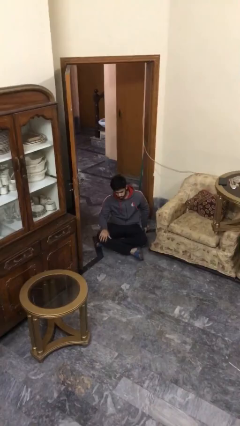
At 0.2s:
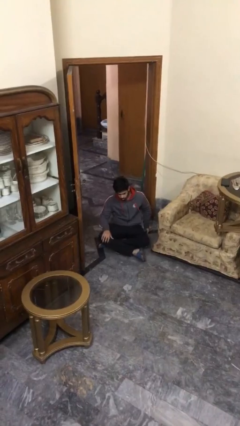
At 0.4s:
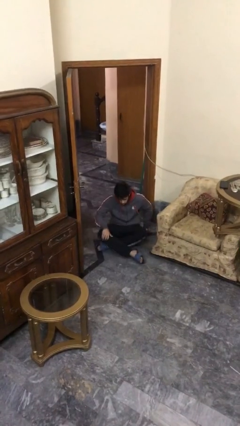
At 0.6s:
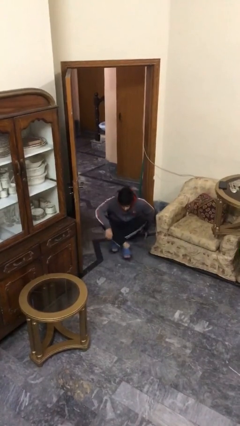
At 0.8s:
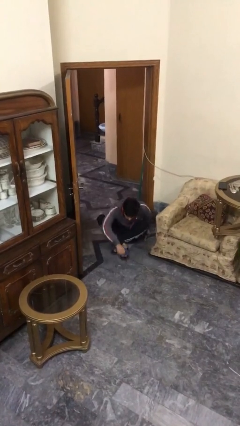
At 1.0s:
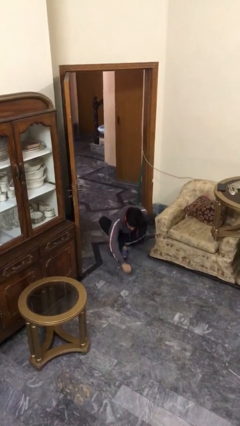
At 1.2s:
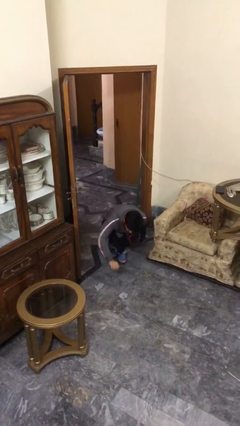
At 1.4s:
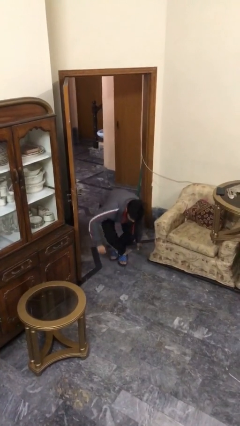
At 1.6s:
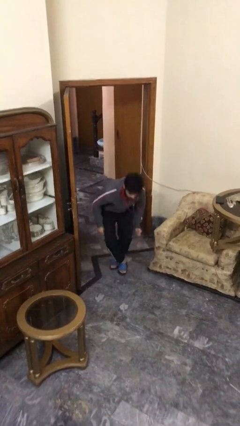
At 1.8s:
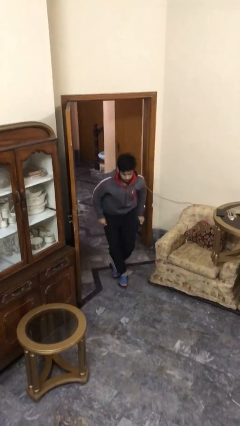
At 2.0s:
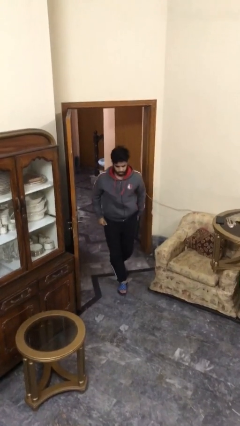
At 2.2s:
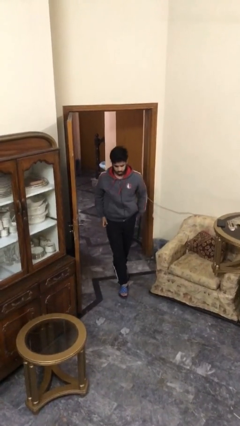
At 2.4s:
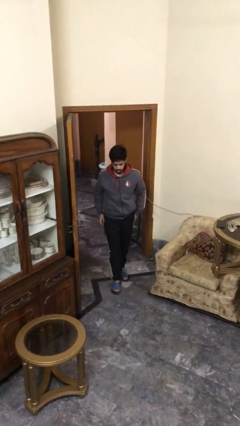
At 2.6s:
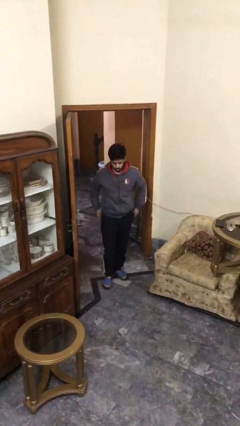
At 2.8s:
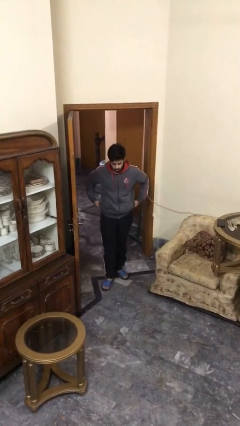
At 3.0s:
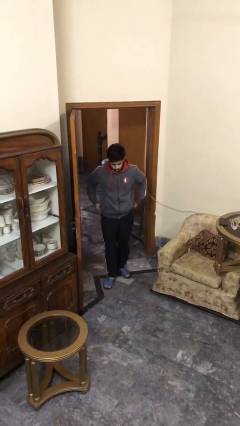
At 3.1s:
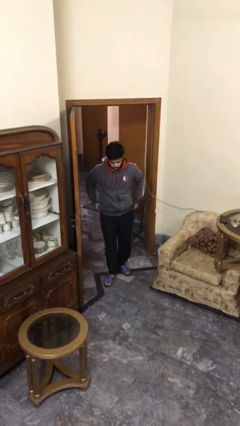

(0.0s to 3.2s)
person stands up

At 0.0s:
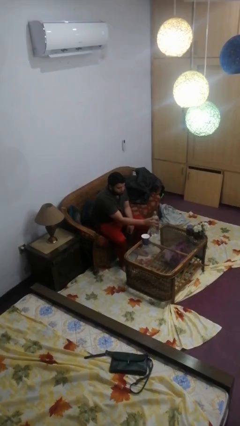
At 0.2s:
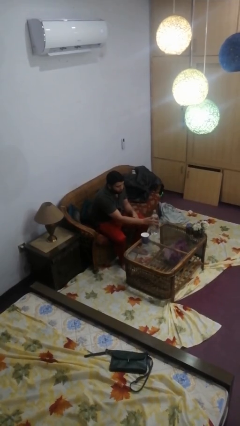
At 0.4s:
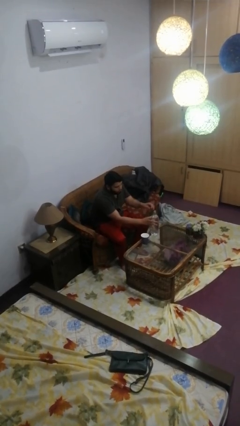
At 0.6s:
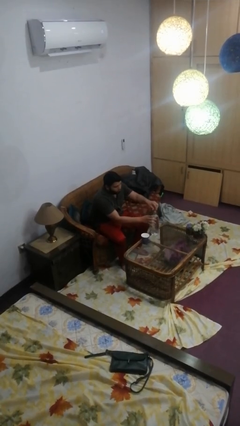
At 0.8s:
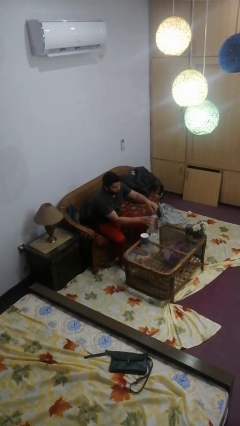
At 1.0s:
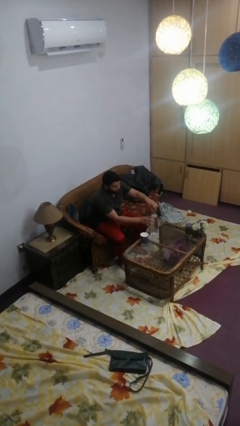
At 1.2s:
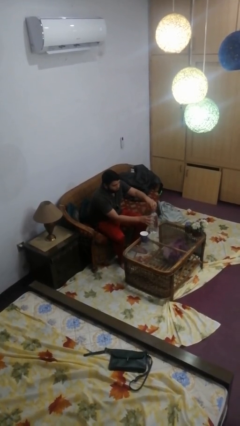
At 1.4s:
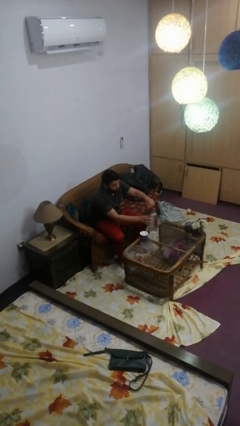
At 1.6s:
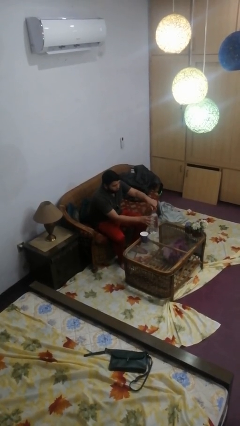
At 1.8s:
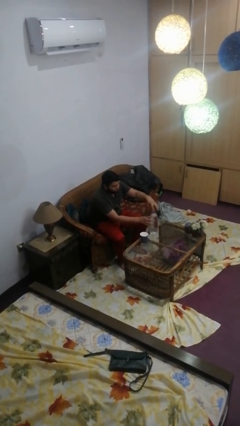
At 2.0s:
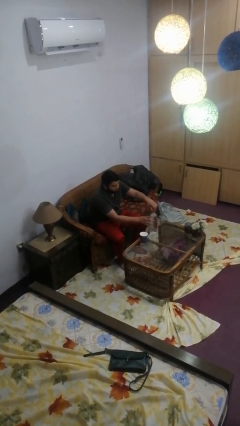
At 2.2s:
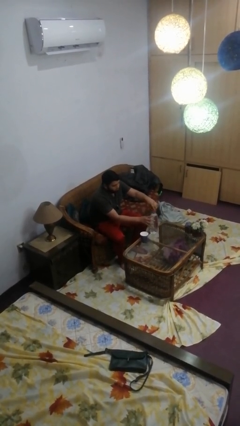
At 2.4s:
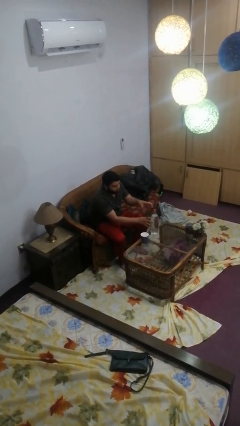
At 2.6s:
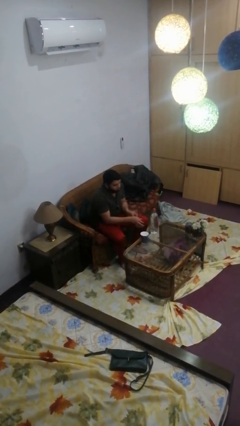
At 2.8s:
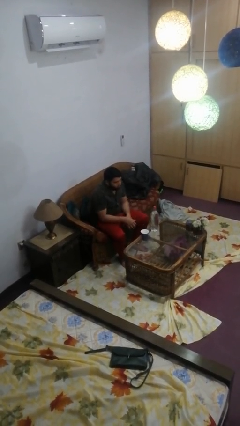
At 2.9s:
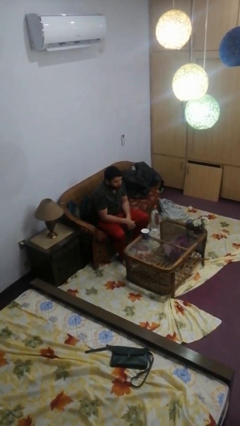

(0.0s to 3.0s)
person screws lid to bottle

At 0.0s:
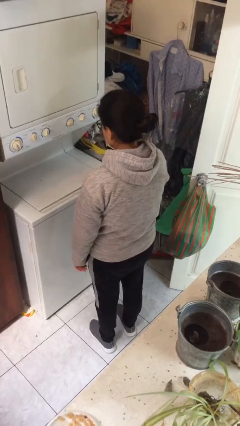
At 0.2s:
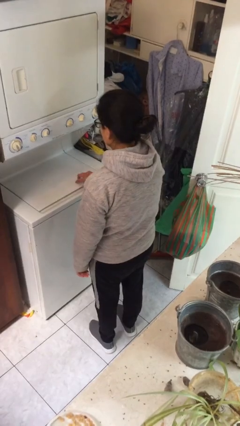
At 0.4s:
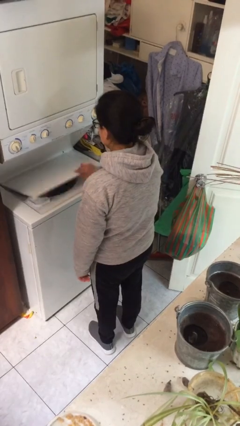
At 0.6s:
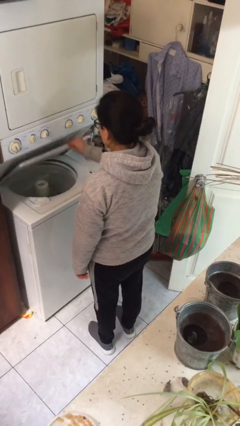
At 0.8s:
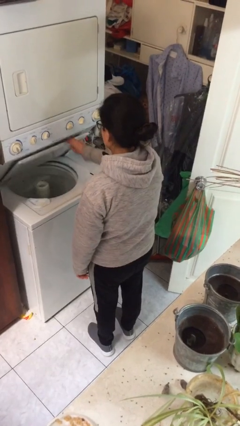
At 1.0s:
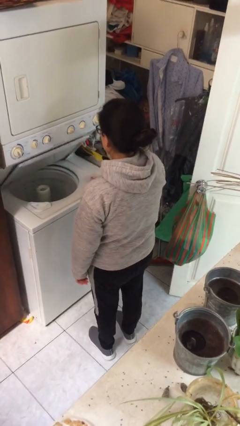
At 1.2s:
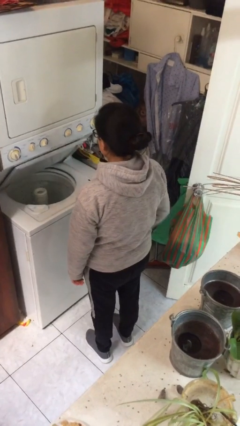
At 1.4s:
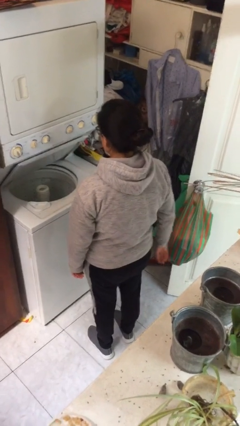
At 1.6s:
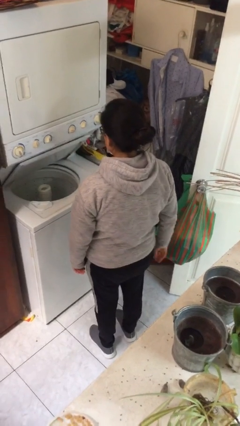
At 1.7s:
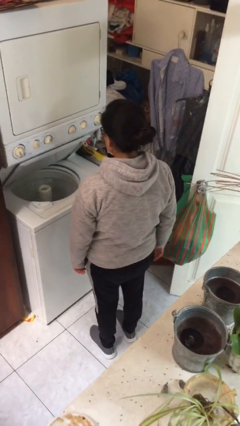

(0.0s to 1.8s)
person opens clothes washer

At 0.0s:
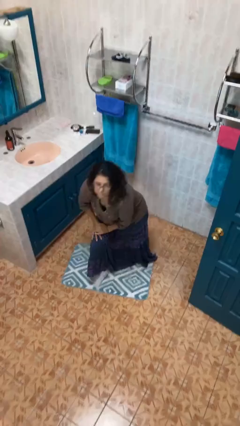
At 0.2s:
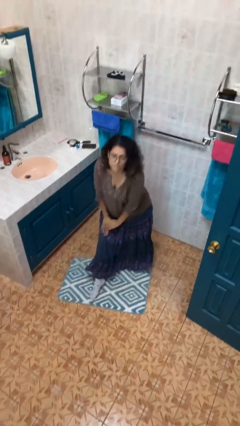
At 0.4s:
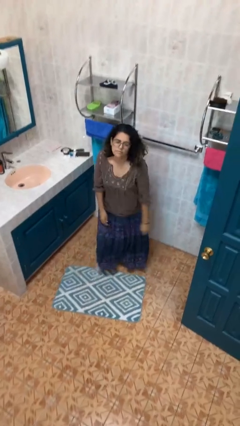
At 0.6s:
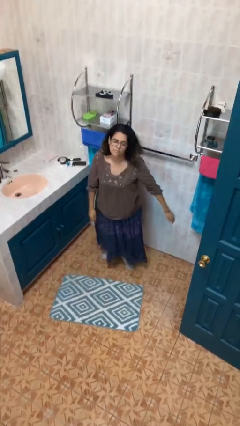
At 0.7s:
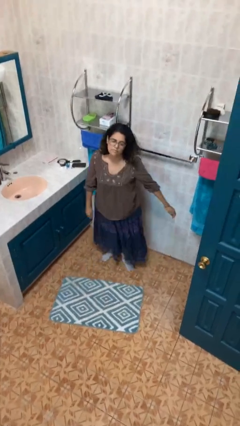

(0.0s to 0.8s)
person stands up from floor

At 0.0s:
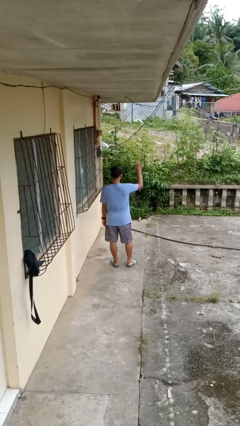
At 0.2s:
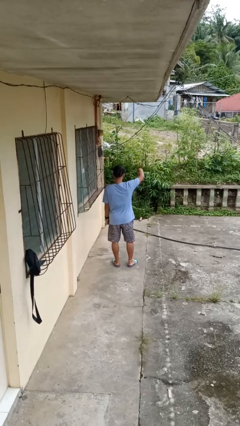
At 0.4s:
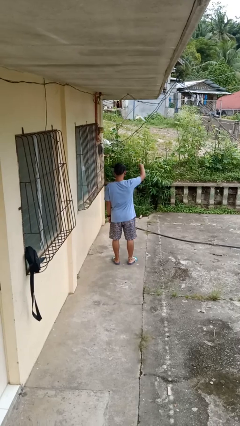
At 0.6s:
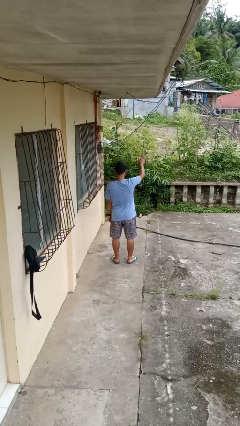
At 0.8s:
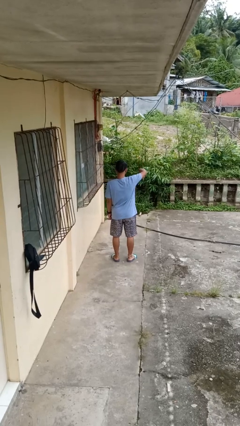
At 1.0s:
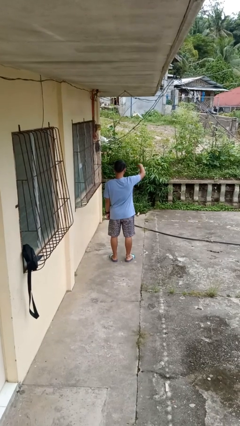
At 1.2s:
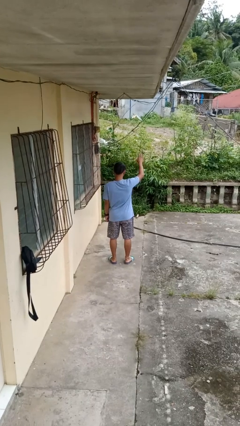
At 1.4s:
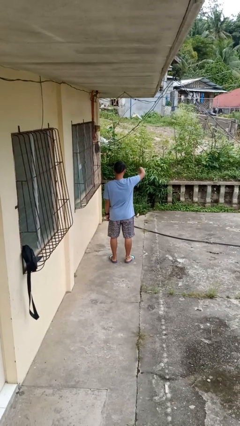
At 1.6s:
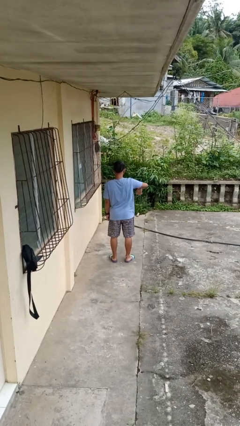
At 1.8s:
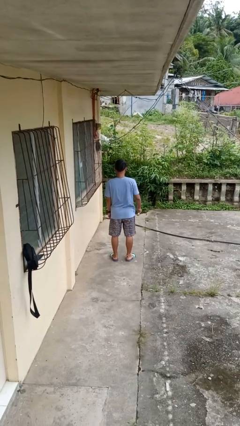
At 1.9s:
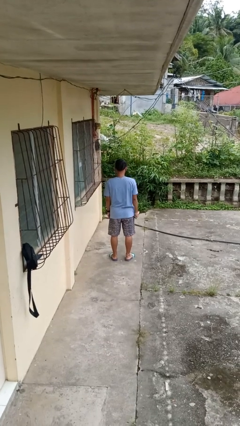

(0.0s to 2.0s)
person gestures come here

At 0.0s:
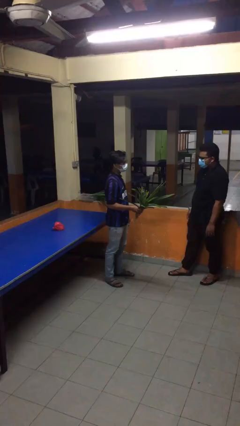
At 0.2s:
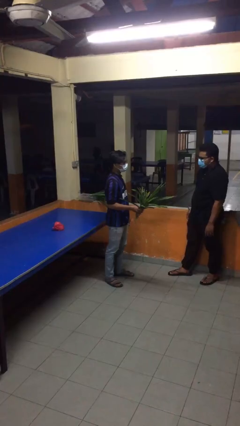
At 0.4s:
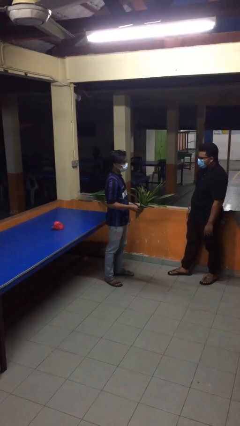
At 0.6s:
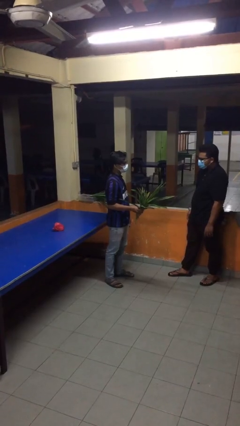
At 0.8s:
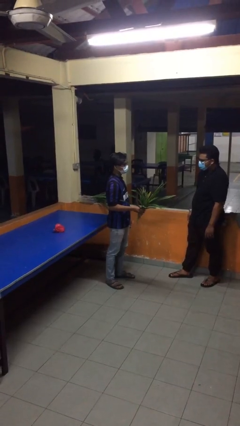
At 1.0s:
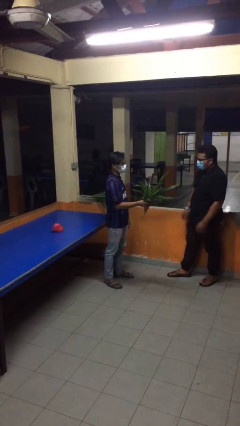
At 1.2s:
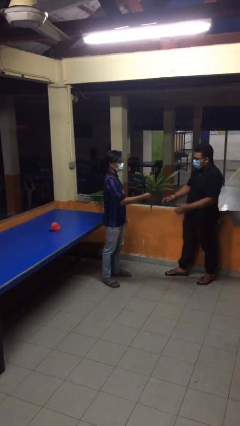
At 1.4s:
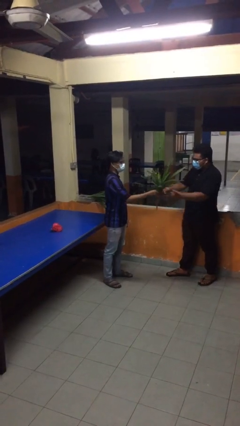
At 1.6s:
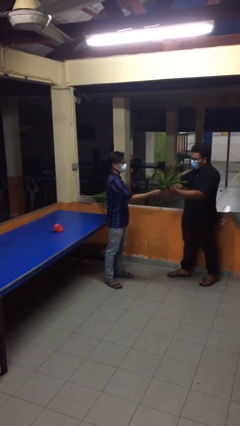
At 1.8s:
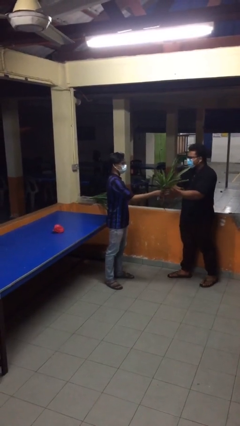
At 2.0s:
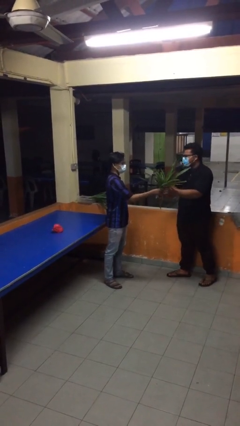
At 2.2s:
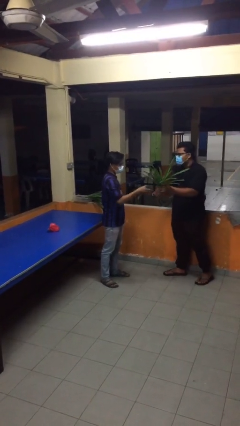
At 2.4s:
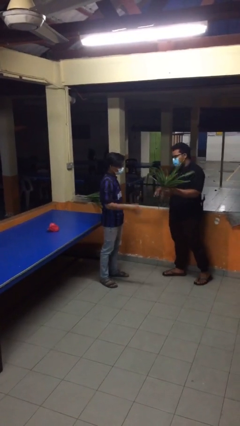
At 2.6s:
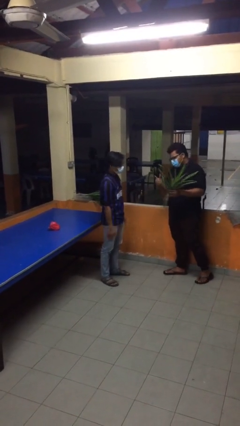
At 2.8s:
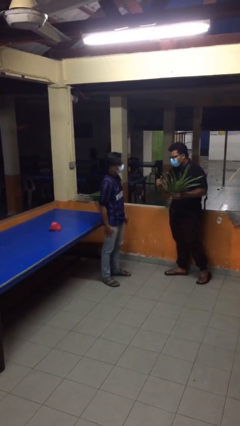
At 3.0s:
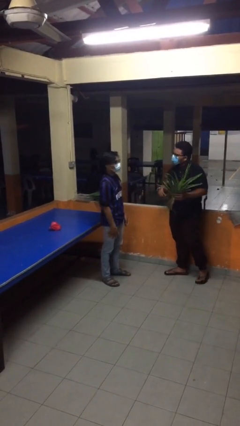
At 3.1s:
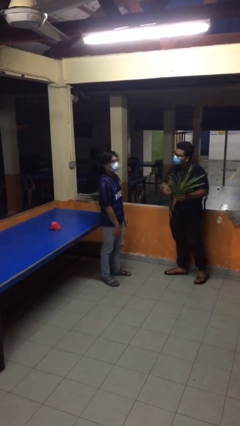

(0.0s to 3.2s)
person transfers object to person

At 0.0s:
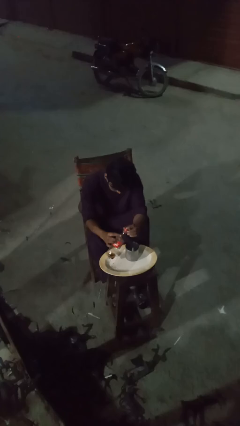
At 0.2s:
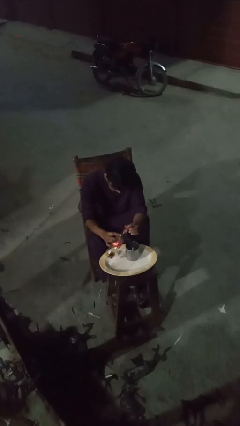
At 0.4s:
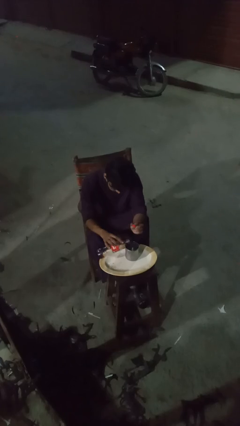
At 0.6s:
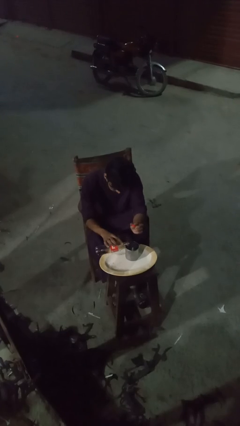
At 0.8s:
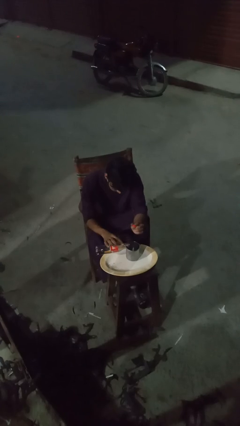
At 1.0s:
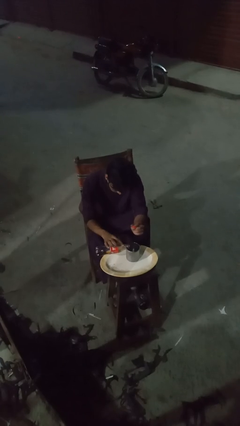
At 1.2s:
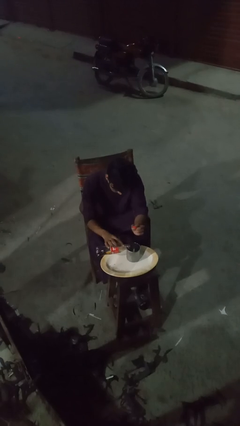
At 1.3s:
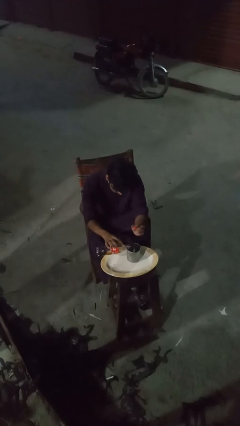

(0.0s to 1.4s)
person pours liquid into cup

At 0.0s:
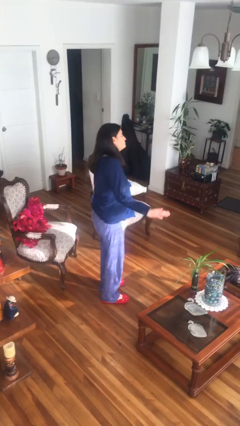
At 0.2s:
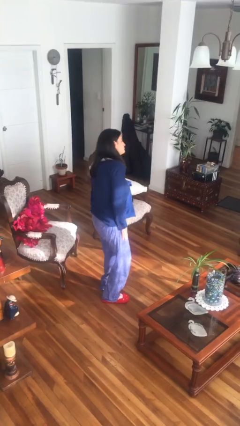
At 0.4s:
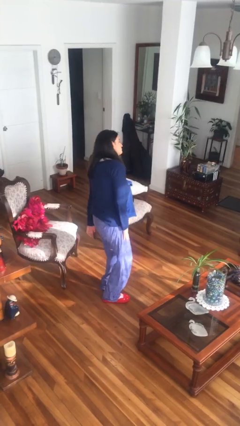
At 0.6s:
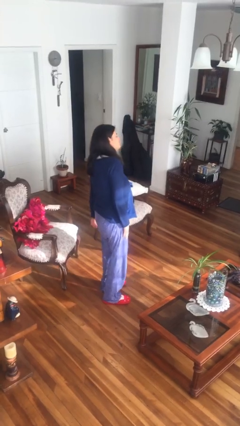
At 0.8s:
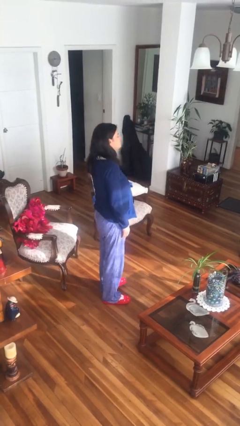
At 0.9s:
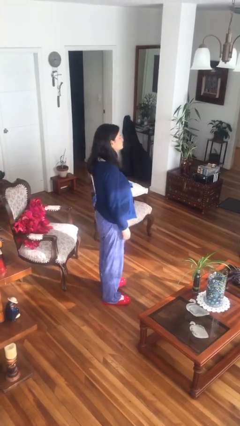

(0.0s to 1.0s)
person slaps hands on thighs

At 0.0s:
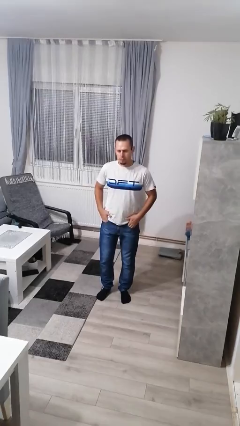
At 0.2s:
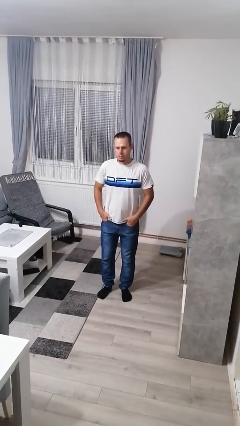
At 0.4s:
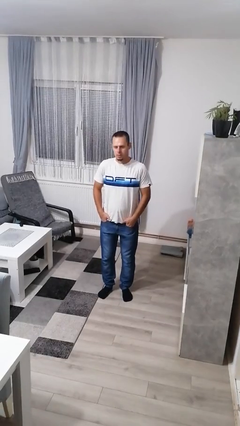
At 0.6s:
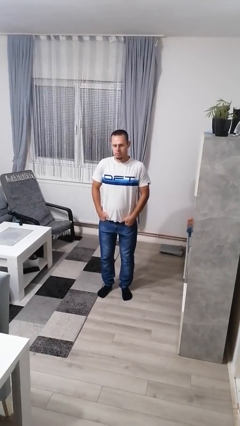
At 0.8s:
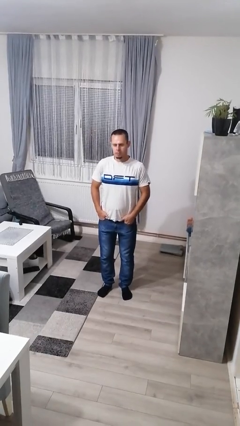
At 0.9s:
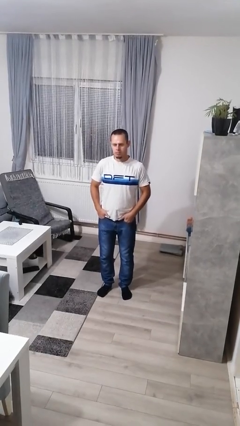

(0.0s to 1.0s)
person puts hands in back pockets
